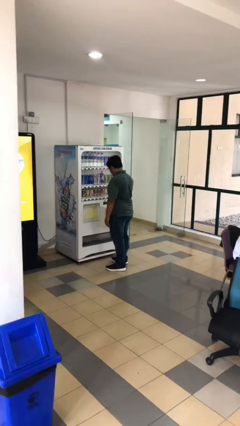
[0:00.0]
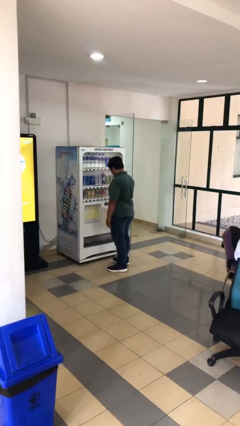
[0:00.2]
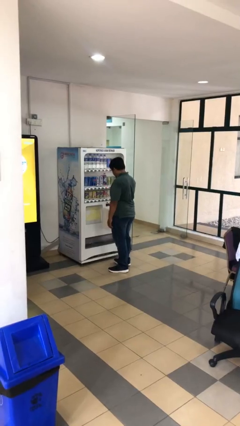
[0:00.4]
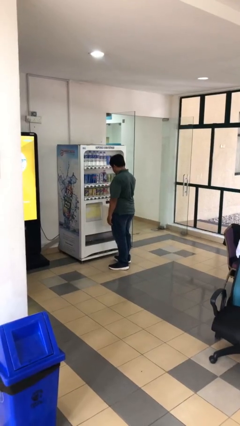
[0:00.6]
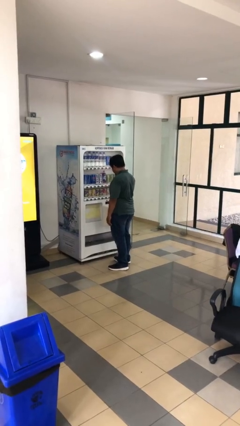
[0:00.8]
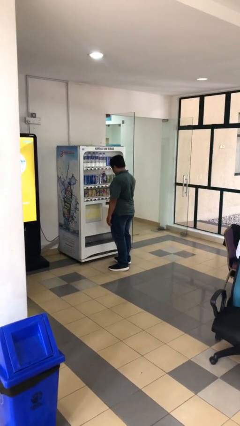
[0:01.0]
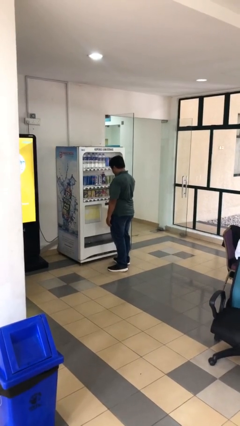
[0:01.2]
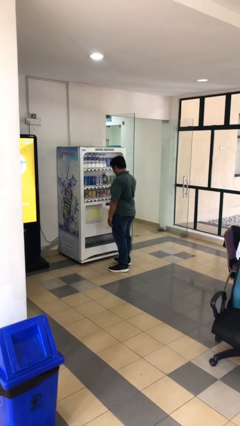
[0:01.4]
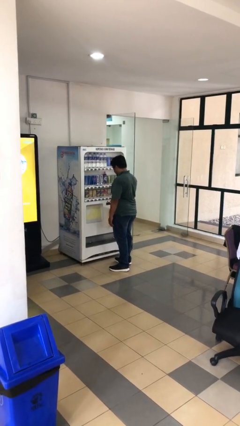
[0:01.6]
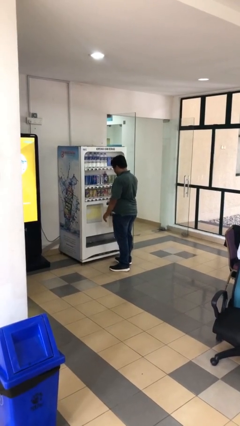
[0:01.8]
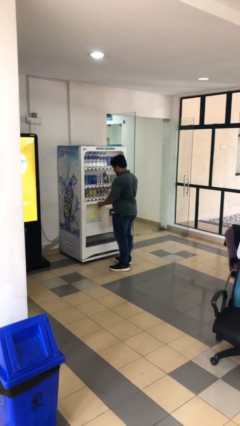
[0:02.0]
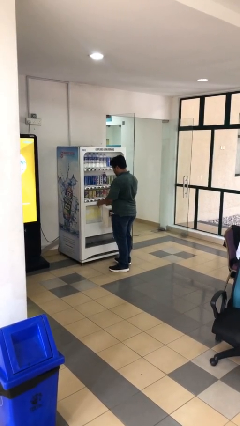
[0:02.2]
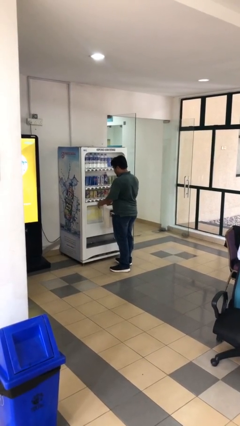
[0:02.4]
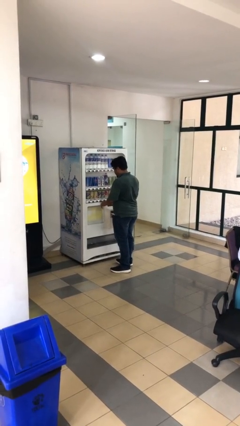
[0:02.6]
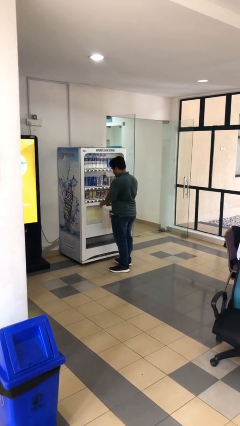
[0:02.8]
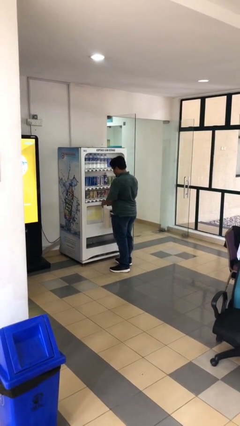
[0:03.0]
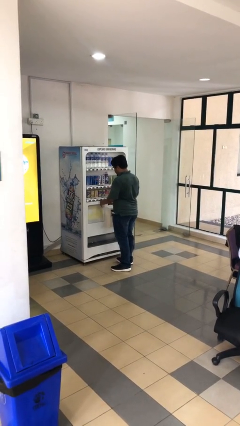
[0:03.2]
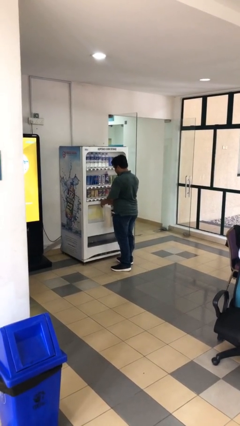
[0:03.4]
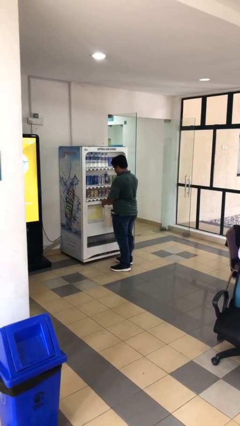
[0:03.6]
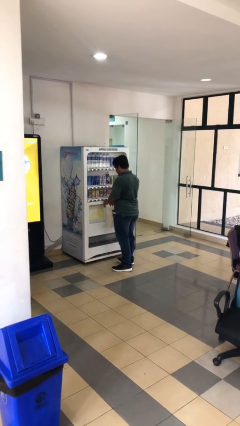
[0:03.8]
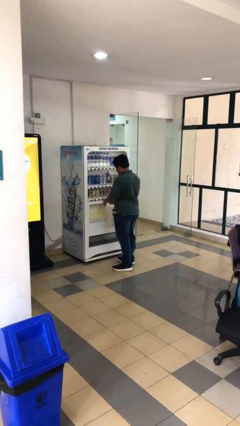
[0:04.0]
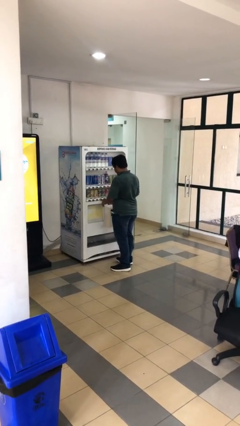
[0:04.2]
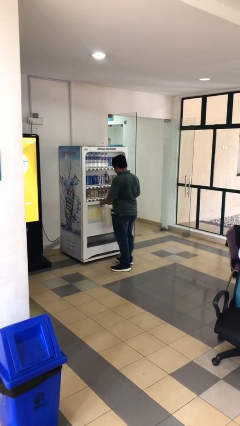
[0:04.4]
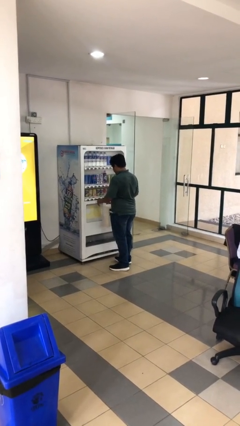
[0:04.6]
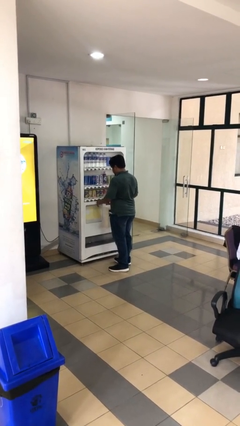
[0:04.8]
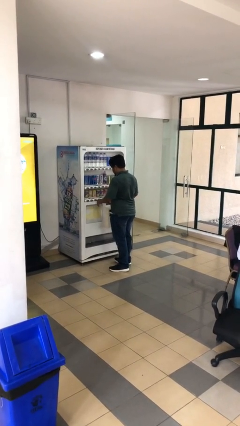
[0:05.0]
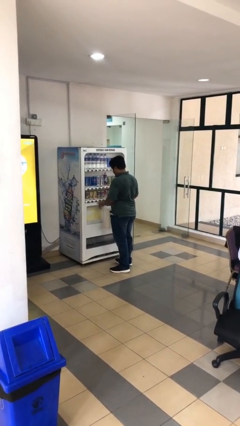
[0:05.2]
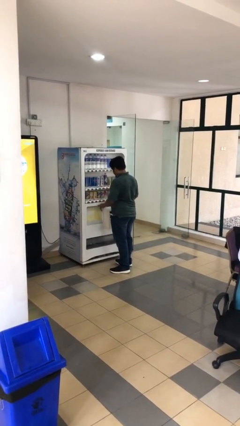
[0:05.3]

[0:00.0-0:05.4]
person purchases from machine

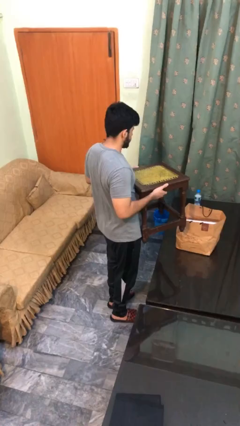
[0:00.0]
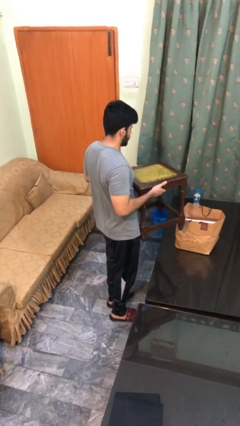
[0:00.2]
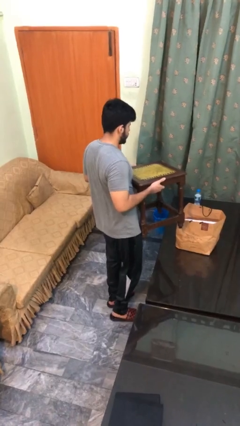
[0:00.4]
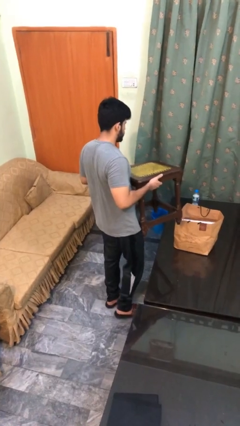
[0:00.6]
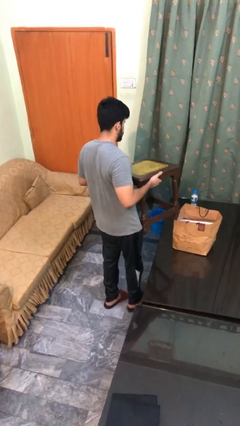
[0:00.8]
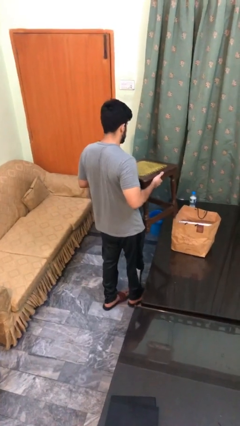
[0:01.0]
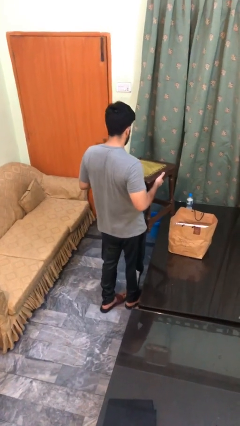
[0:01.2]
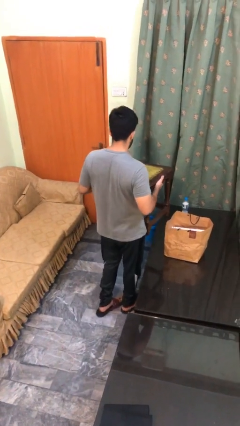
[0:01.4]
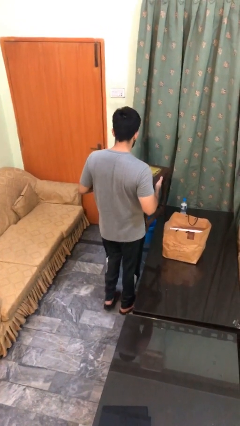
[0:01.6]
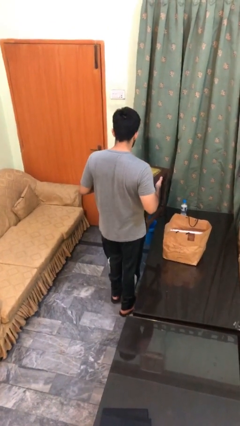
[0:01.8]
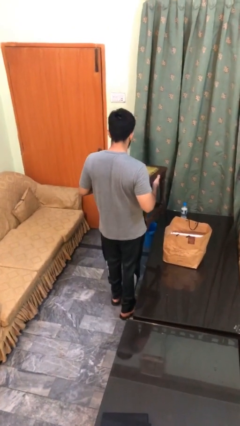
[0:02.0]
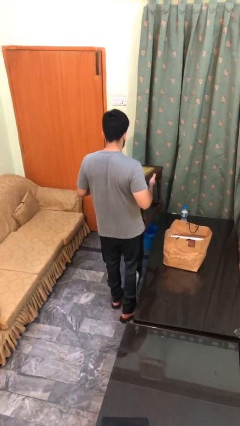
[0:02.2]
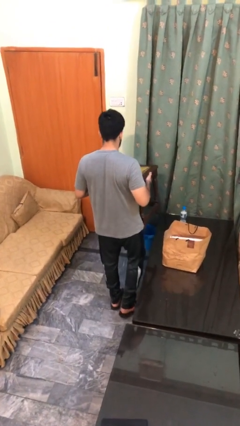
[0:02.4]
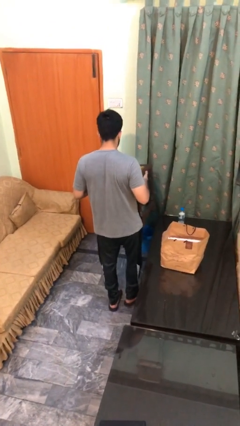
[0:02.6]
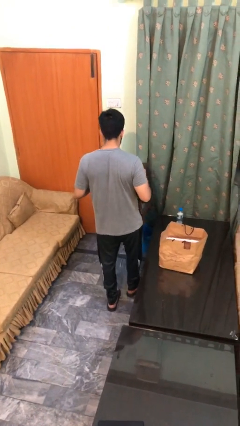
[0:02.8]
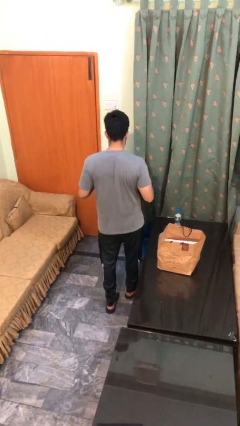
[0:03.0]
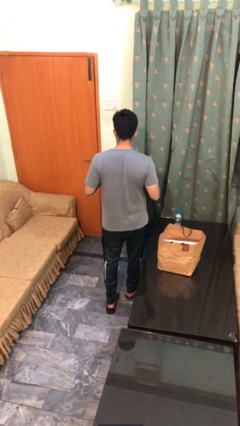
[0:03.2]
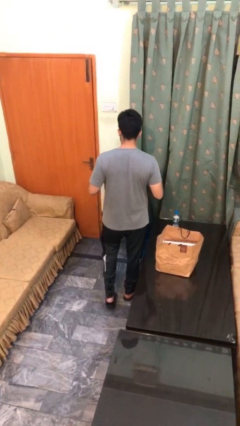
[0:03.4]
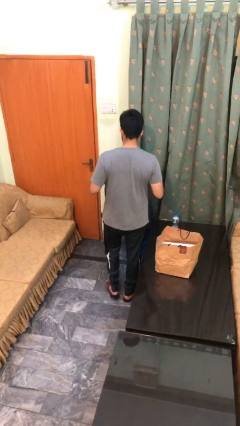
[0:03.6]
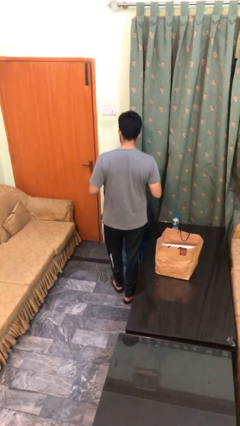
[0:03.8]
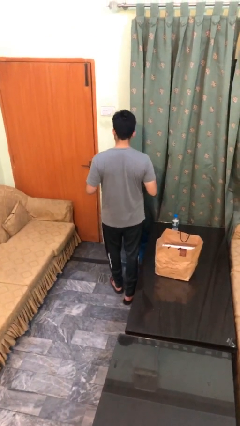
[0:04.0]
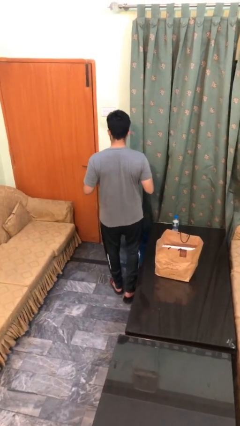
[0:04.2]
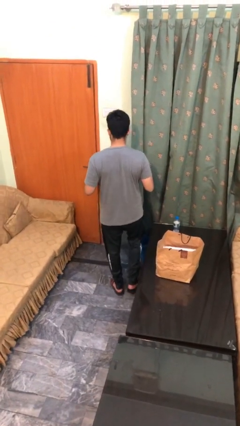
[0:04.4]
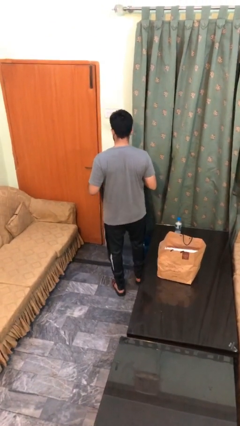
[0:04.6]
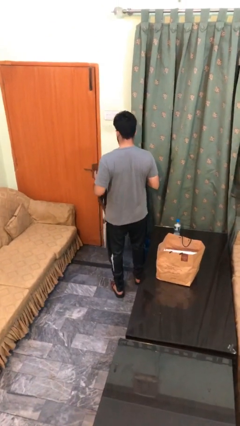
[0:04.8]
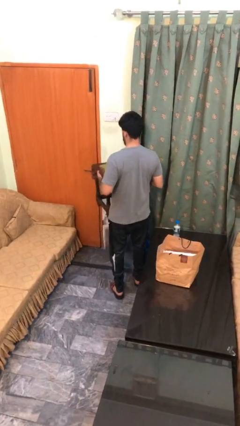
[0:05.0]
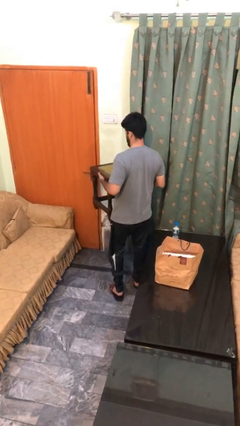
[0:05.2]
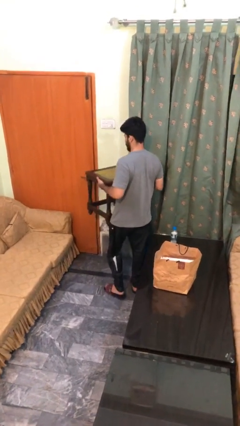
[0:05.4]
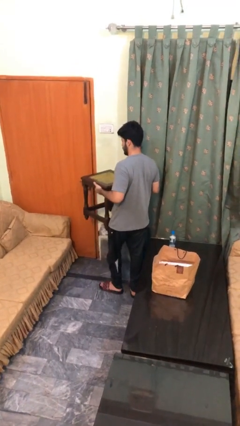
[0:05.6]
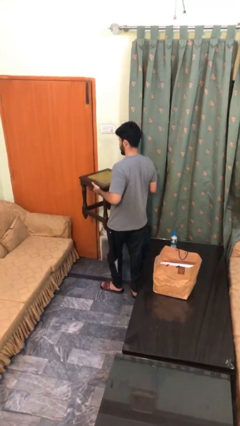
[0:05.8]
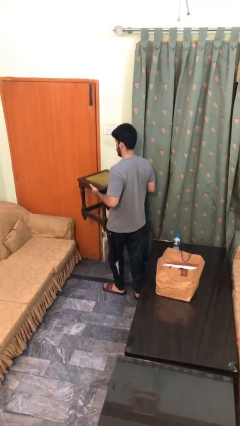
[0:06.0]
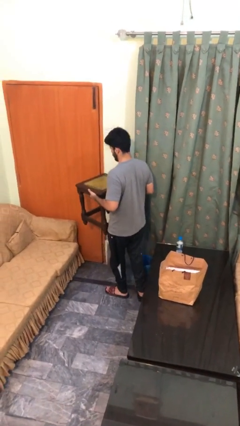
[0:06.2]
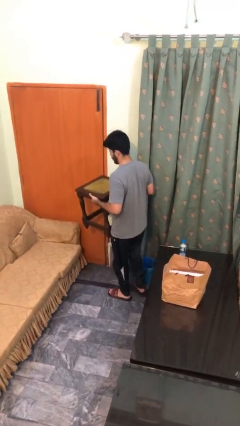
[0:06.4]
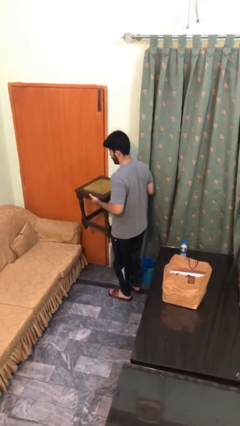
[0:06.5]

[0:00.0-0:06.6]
person carries furniture

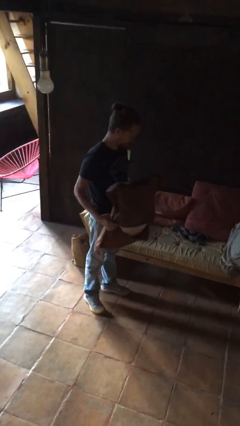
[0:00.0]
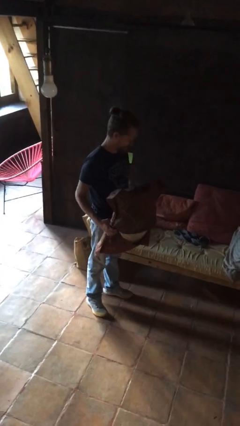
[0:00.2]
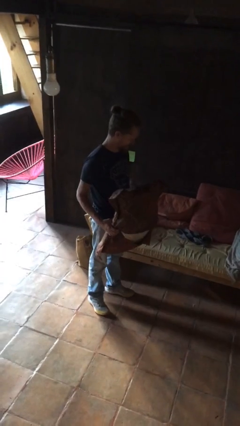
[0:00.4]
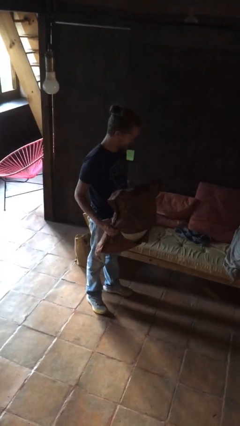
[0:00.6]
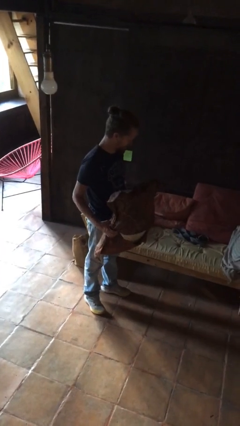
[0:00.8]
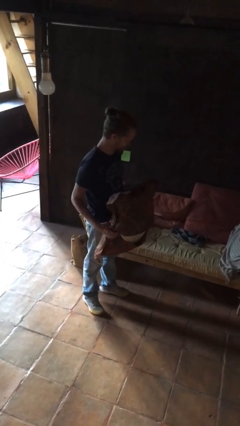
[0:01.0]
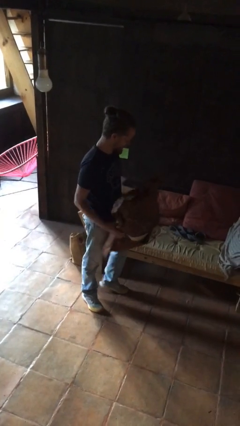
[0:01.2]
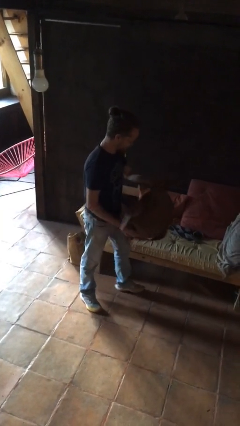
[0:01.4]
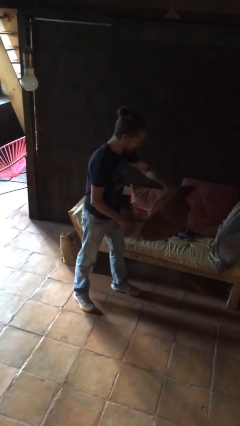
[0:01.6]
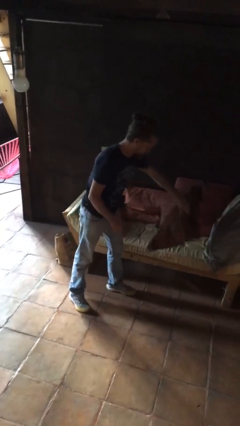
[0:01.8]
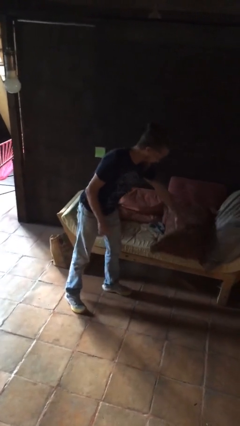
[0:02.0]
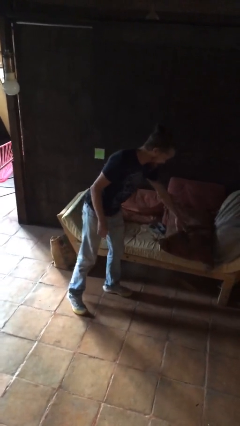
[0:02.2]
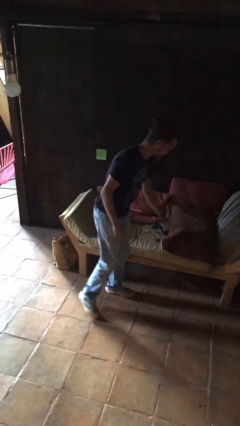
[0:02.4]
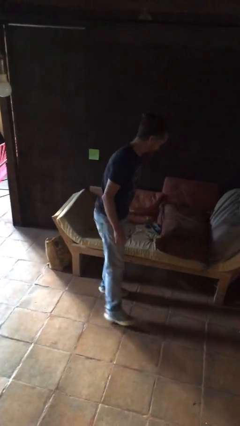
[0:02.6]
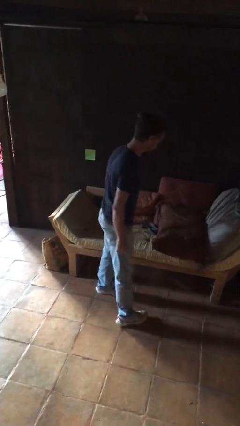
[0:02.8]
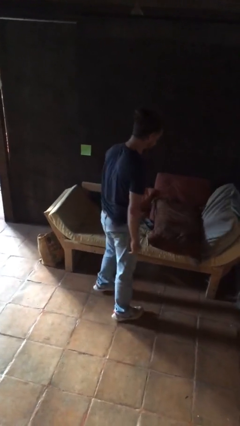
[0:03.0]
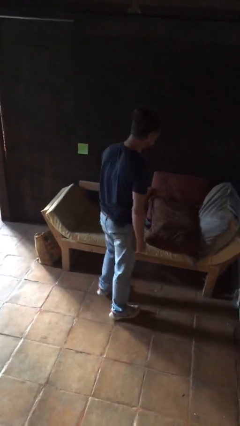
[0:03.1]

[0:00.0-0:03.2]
person puts down object on couch

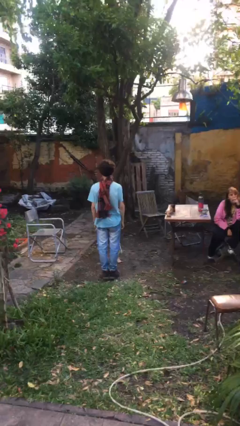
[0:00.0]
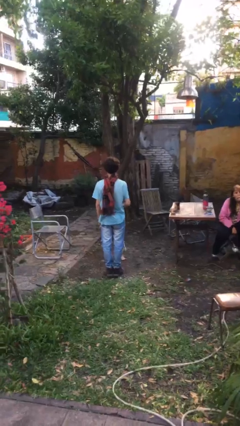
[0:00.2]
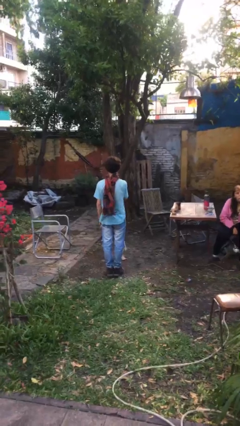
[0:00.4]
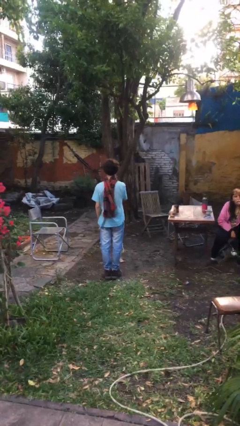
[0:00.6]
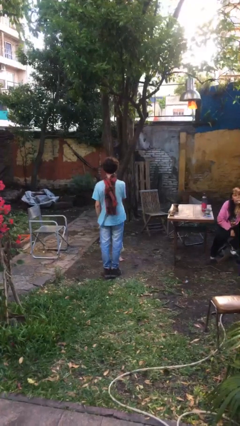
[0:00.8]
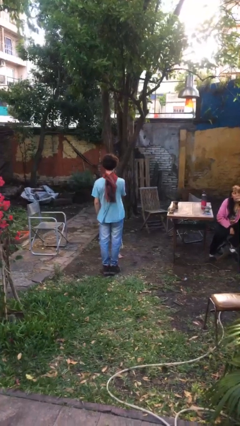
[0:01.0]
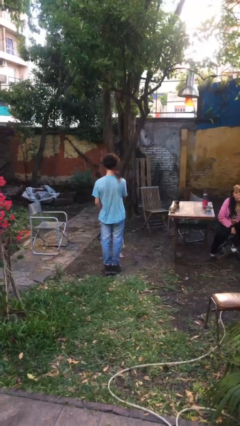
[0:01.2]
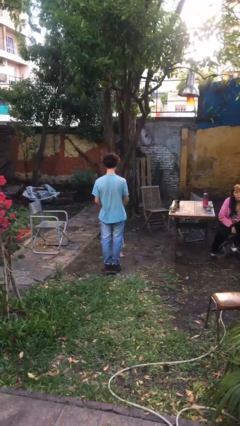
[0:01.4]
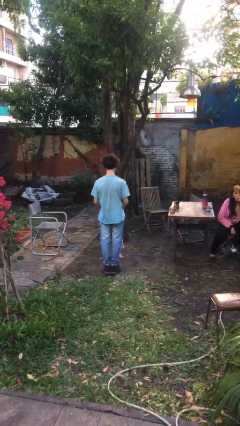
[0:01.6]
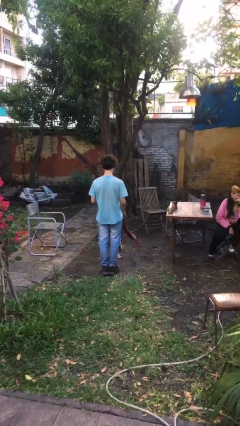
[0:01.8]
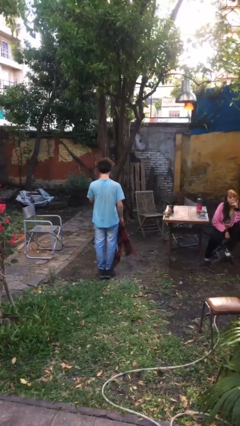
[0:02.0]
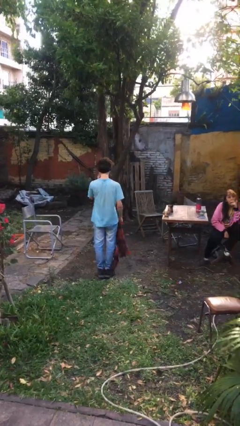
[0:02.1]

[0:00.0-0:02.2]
person takes off scarf

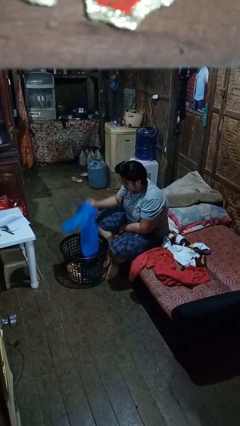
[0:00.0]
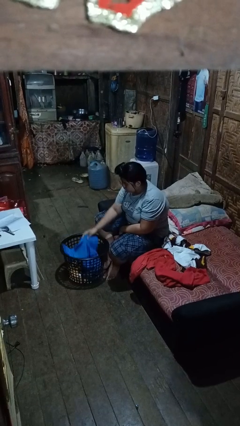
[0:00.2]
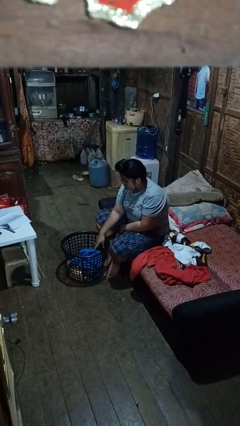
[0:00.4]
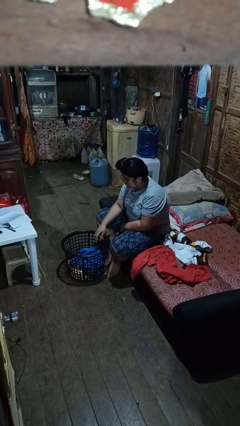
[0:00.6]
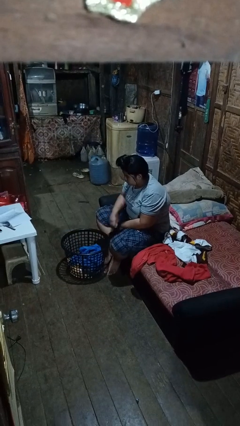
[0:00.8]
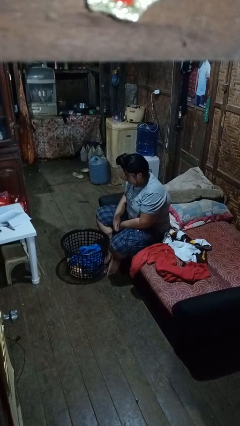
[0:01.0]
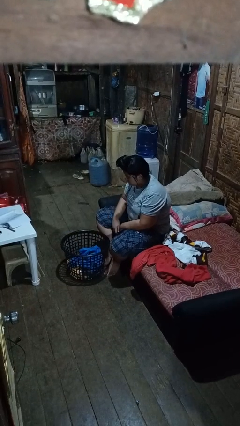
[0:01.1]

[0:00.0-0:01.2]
person puts object into basket
